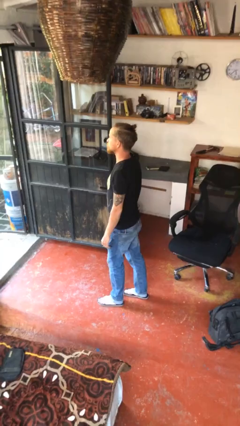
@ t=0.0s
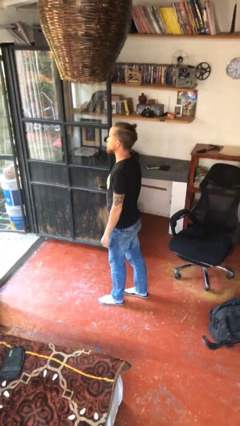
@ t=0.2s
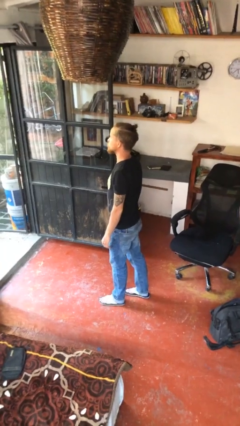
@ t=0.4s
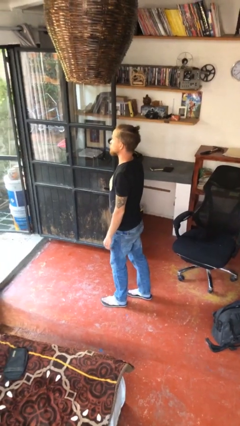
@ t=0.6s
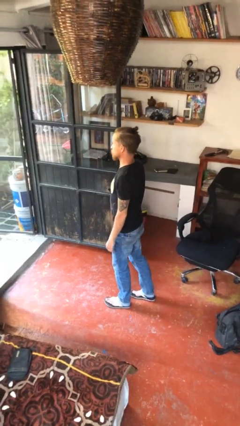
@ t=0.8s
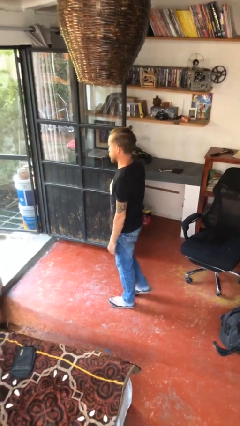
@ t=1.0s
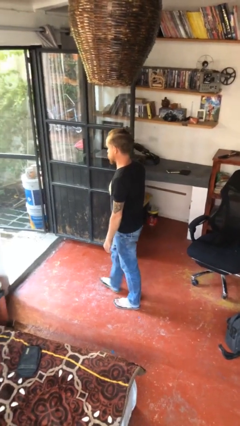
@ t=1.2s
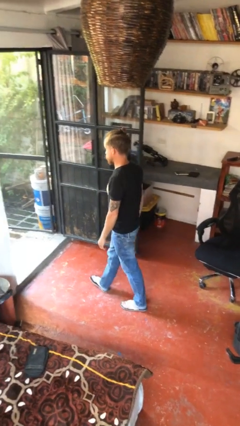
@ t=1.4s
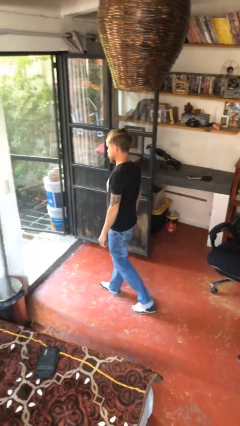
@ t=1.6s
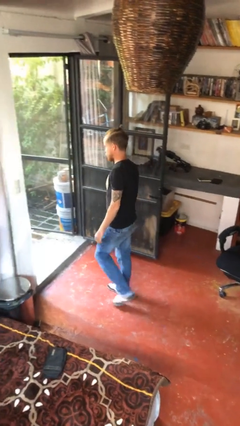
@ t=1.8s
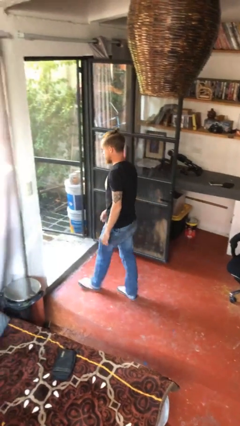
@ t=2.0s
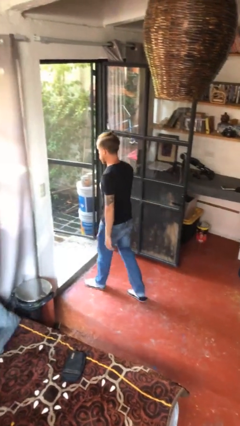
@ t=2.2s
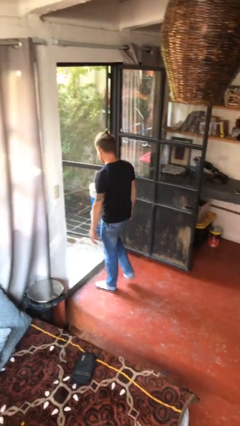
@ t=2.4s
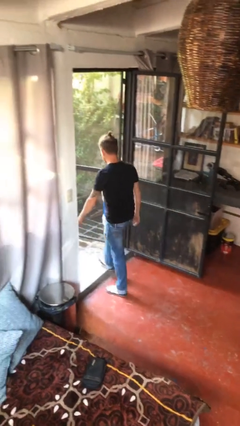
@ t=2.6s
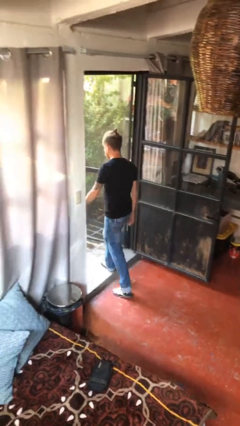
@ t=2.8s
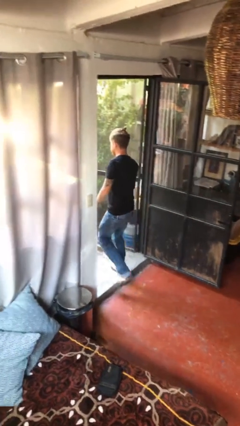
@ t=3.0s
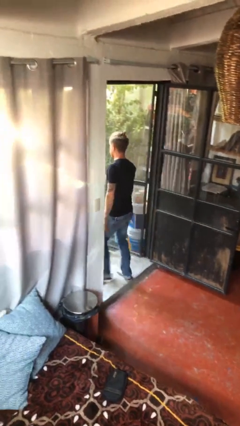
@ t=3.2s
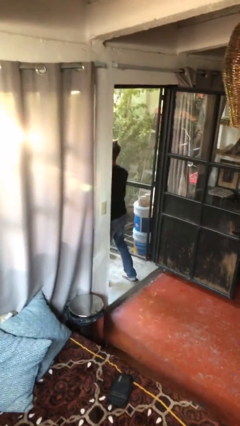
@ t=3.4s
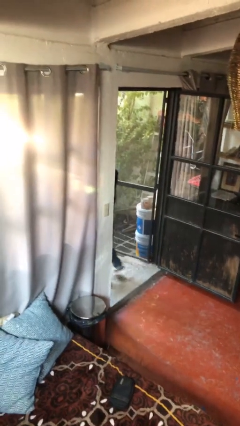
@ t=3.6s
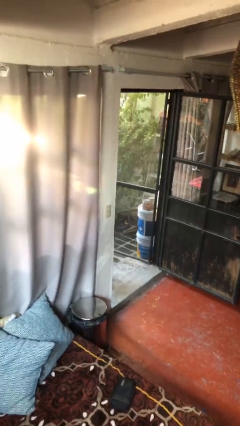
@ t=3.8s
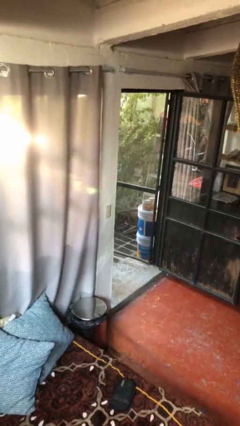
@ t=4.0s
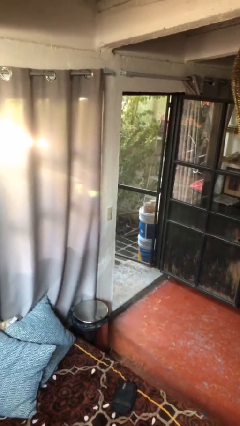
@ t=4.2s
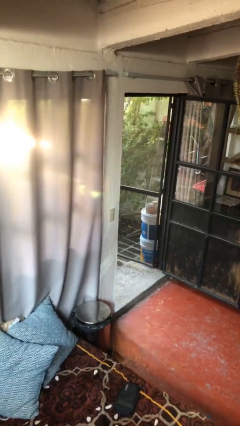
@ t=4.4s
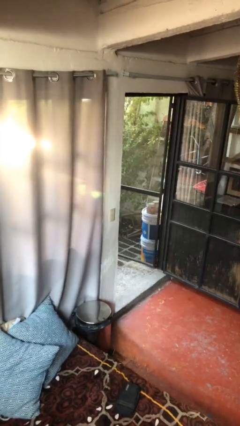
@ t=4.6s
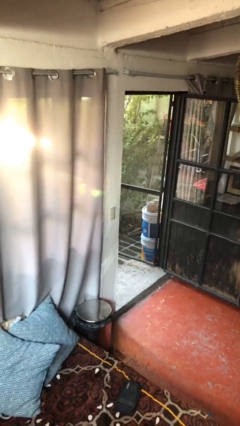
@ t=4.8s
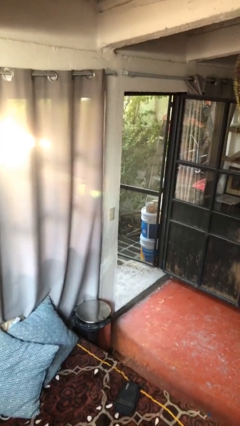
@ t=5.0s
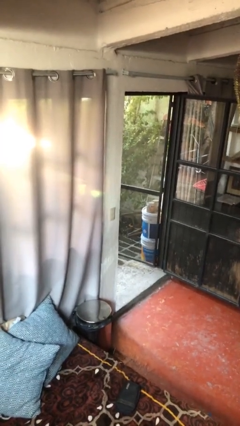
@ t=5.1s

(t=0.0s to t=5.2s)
person exits scene through structure

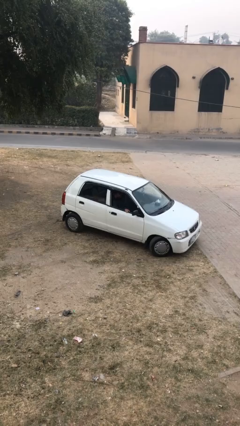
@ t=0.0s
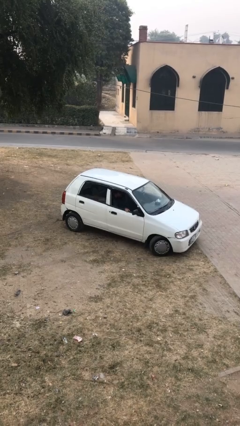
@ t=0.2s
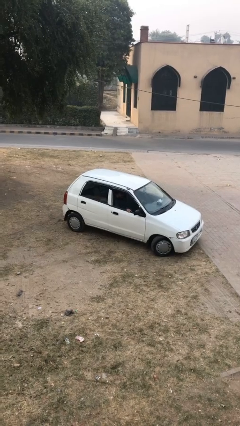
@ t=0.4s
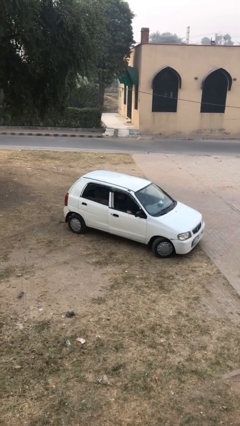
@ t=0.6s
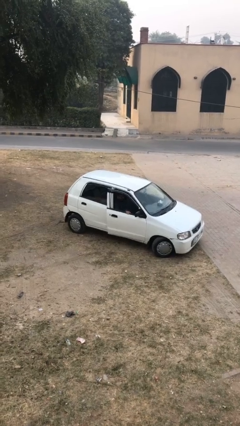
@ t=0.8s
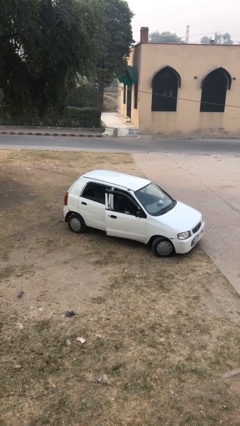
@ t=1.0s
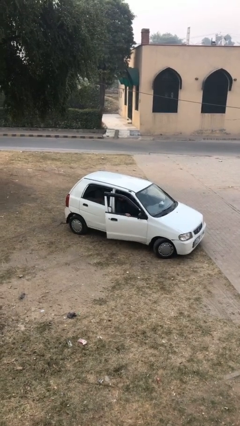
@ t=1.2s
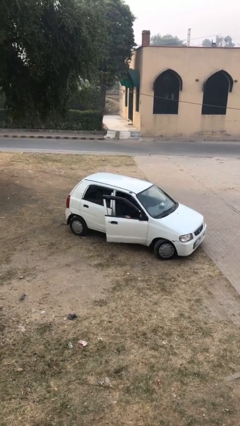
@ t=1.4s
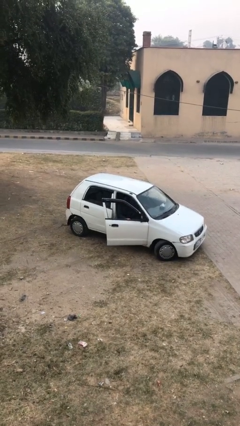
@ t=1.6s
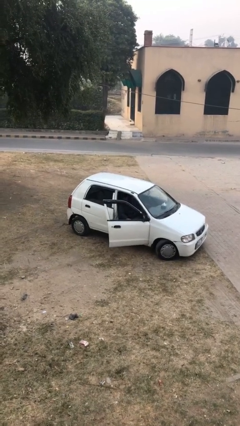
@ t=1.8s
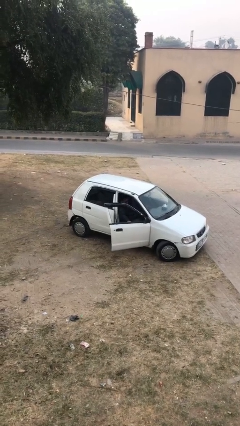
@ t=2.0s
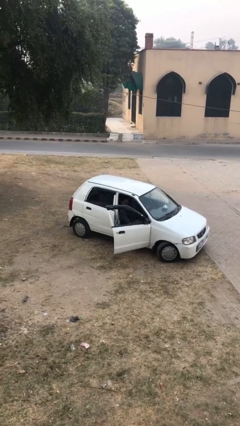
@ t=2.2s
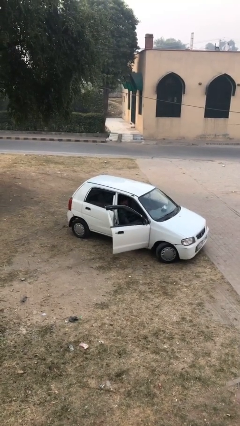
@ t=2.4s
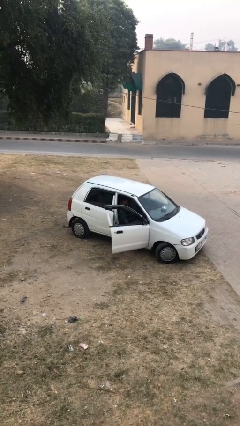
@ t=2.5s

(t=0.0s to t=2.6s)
person opens car door

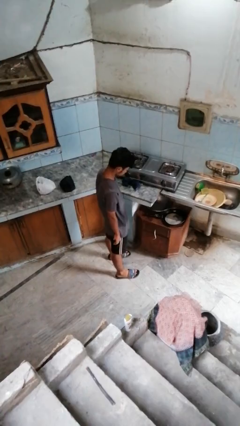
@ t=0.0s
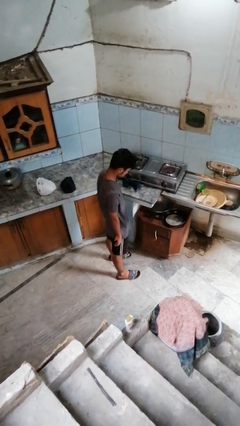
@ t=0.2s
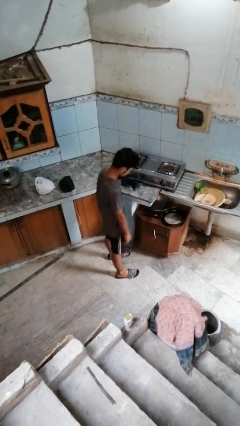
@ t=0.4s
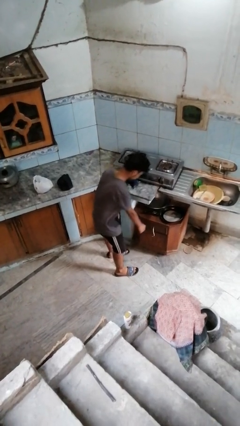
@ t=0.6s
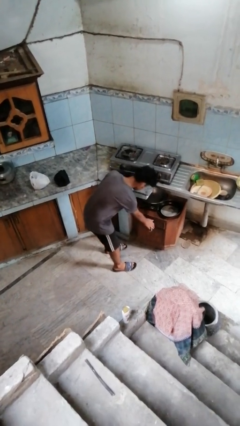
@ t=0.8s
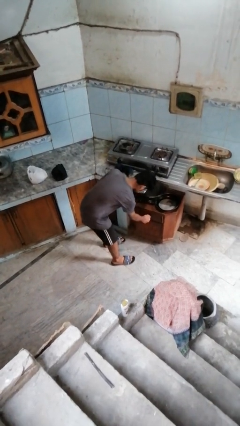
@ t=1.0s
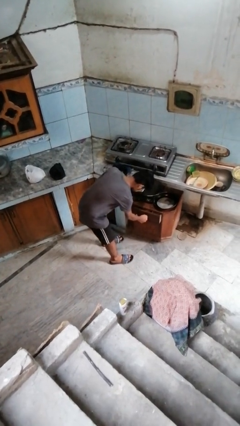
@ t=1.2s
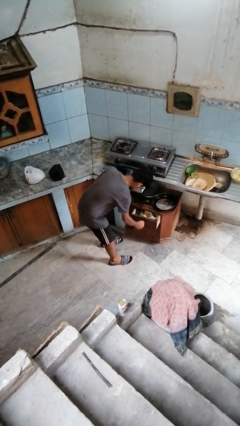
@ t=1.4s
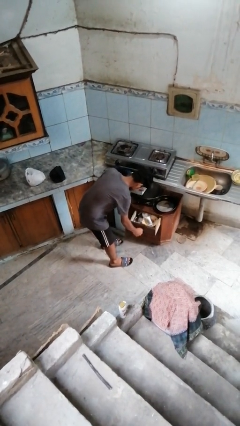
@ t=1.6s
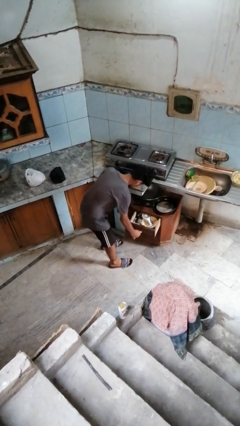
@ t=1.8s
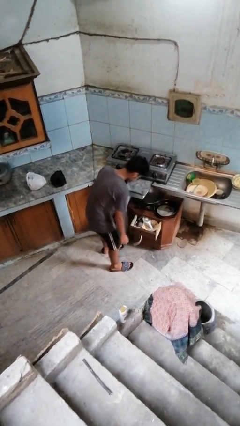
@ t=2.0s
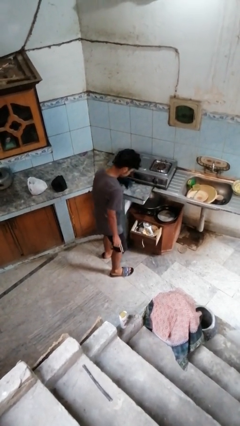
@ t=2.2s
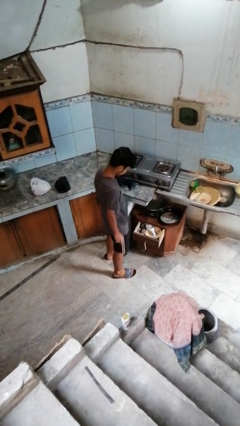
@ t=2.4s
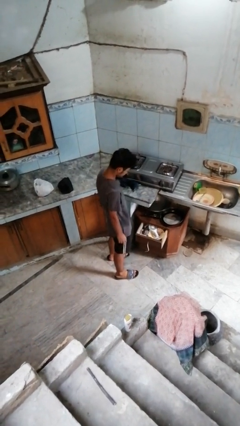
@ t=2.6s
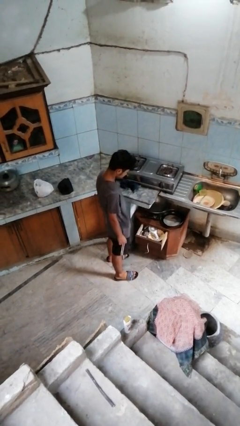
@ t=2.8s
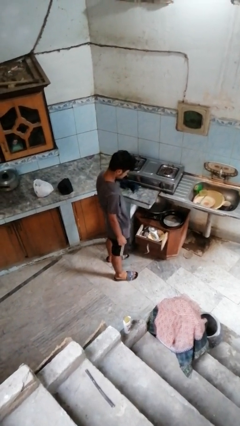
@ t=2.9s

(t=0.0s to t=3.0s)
person opens kitchen drawer

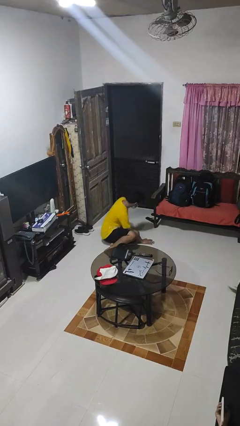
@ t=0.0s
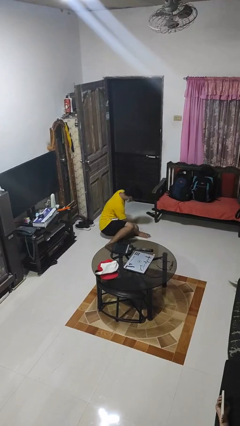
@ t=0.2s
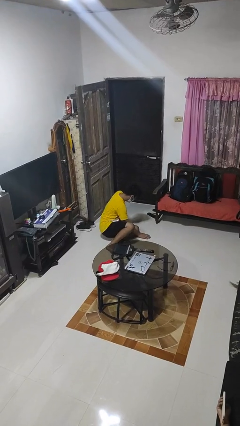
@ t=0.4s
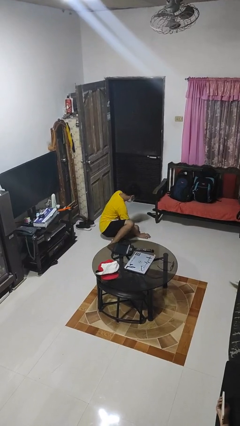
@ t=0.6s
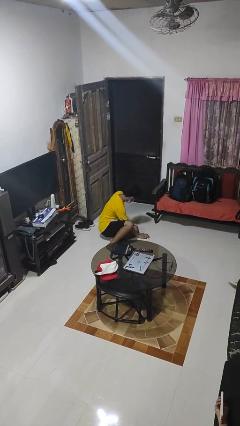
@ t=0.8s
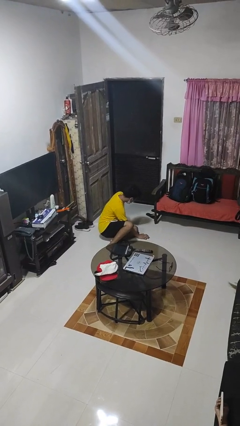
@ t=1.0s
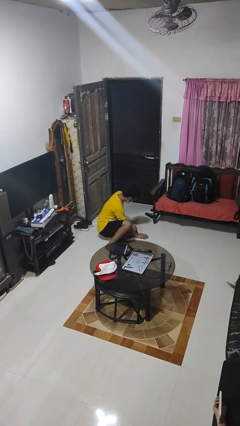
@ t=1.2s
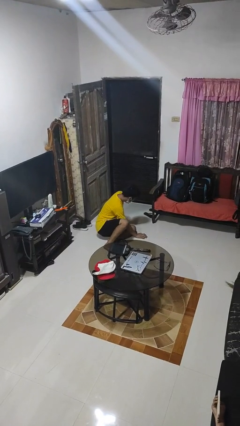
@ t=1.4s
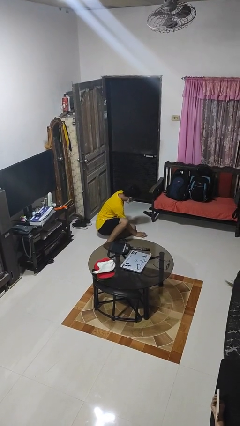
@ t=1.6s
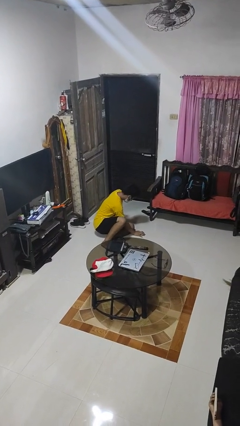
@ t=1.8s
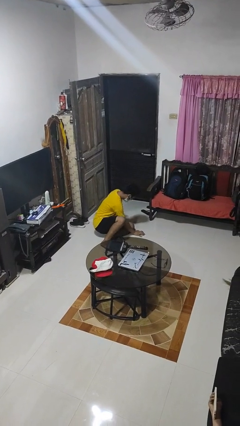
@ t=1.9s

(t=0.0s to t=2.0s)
person lies down on floor

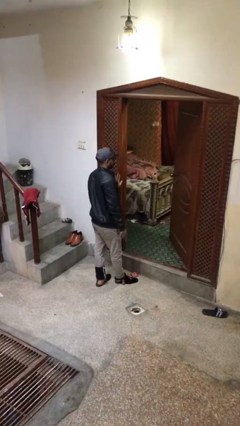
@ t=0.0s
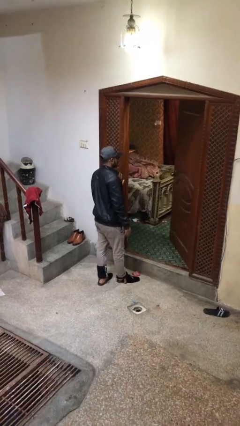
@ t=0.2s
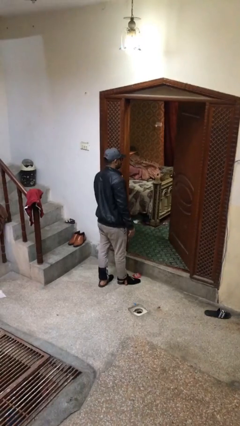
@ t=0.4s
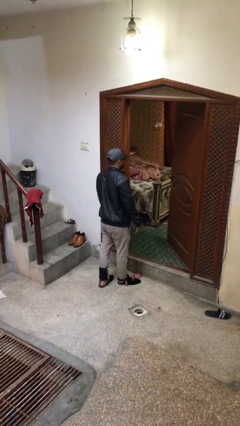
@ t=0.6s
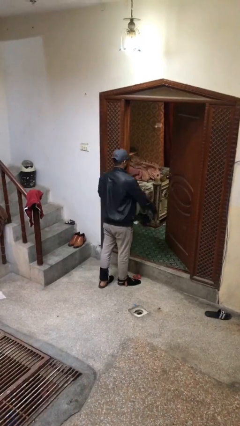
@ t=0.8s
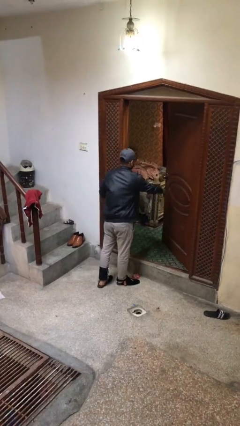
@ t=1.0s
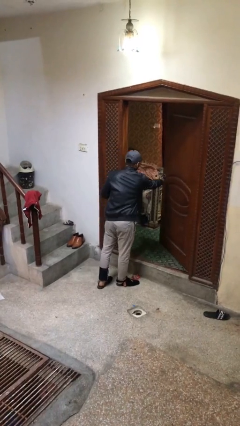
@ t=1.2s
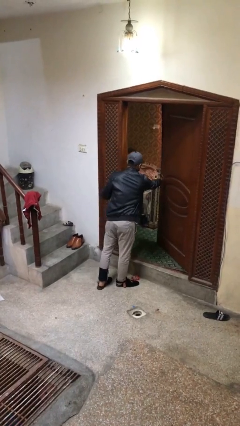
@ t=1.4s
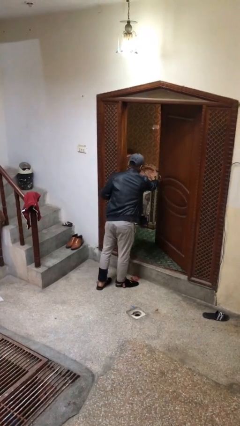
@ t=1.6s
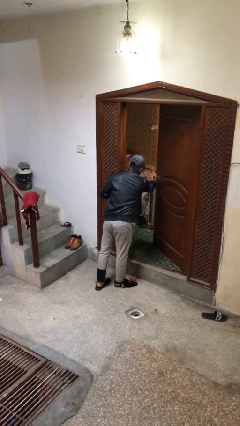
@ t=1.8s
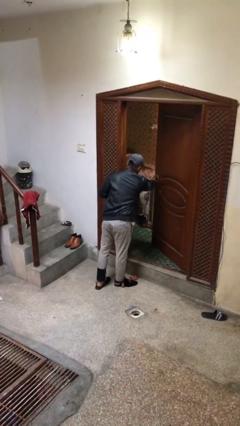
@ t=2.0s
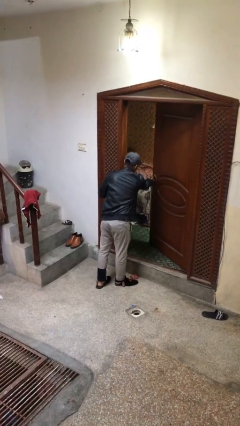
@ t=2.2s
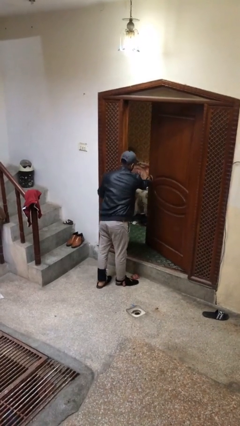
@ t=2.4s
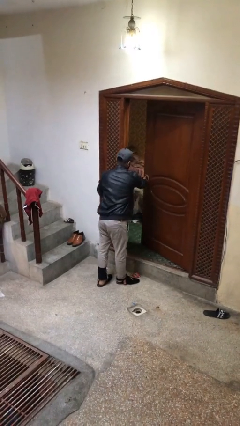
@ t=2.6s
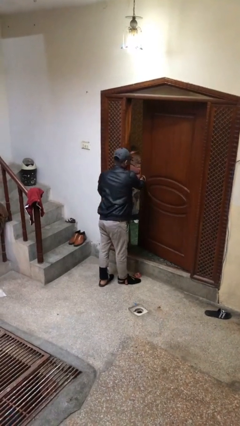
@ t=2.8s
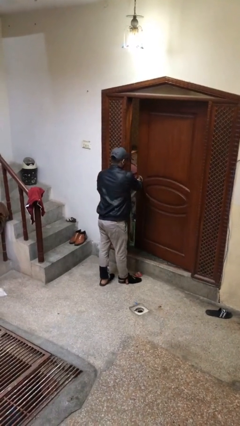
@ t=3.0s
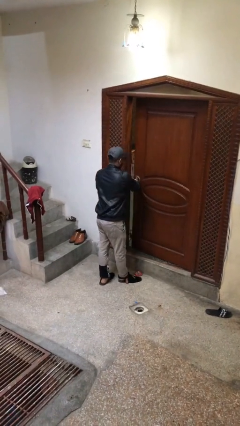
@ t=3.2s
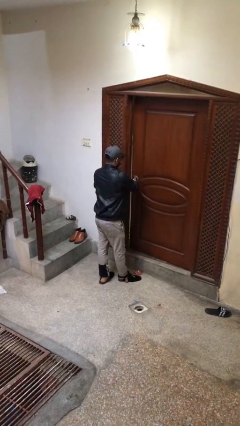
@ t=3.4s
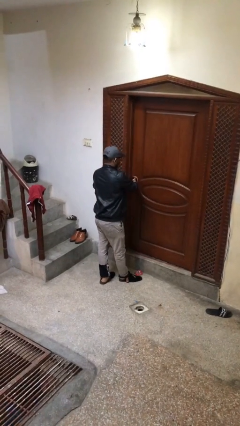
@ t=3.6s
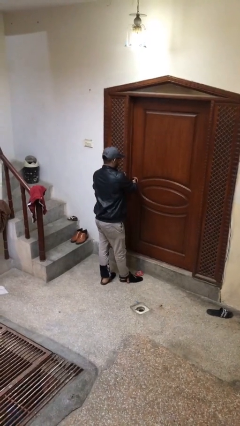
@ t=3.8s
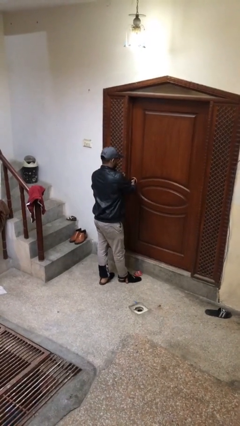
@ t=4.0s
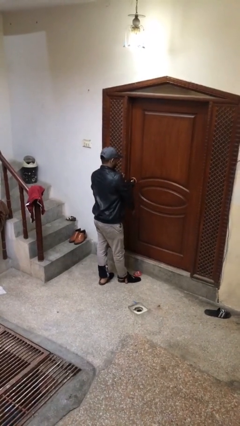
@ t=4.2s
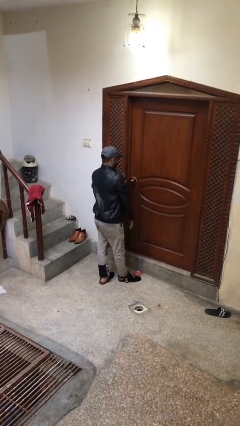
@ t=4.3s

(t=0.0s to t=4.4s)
person closes facility door

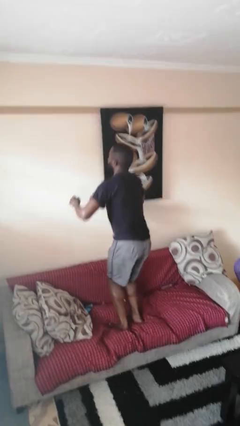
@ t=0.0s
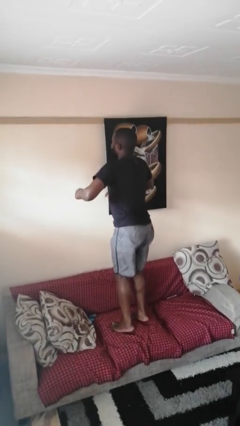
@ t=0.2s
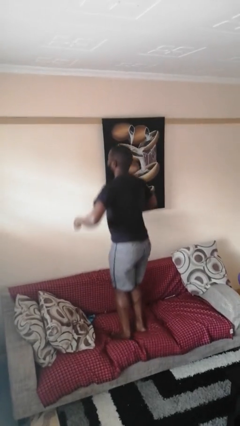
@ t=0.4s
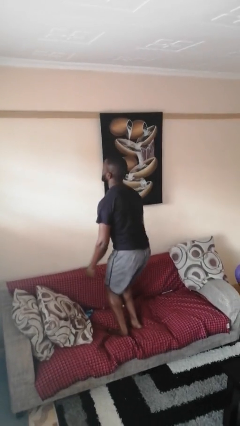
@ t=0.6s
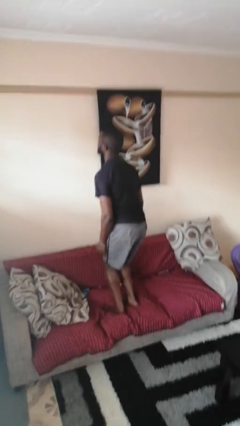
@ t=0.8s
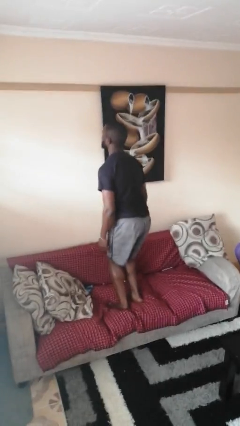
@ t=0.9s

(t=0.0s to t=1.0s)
person jumps on couch
